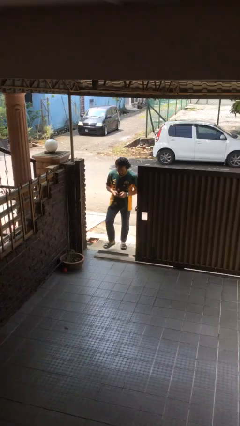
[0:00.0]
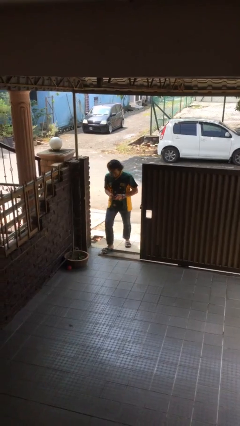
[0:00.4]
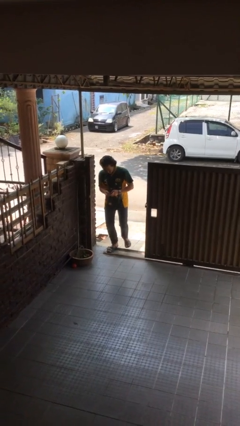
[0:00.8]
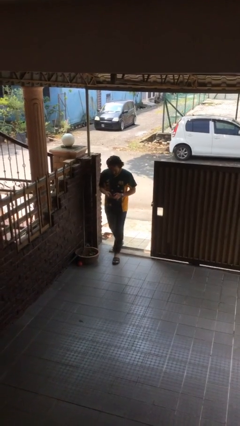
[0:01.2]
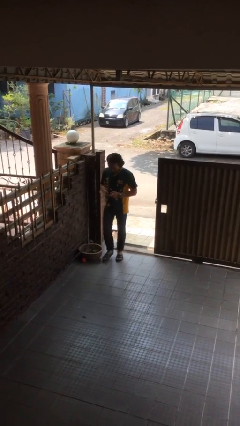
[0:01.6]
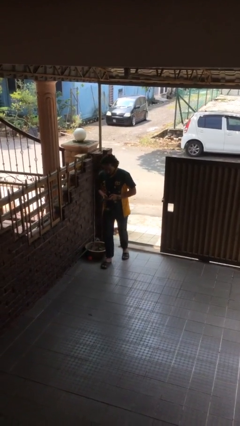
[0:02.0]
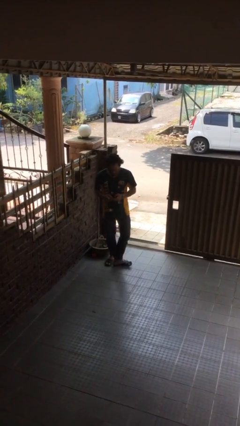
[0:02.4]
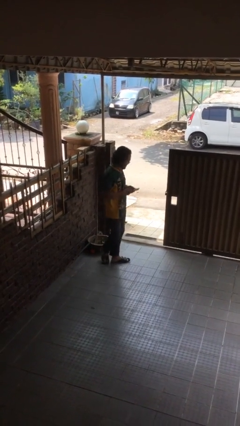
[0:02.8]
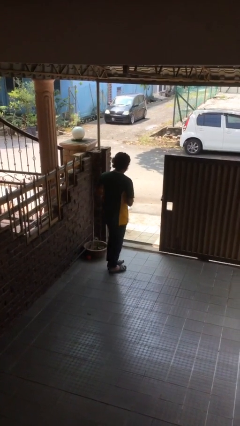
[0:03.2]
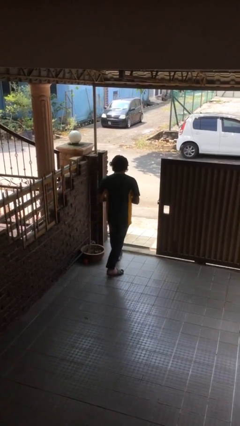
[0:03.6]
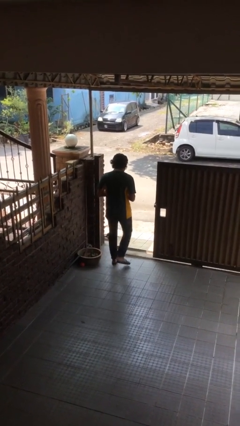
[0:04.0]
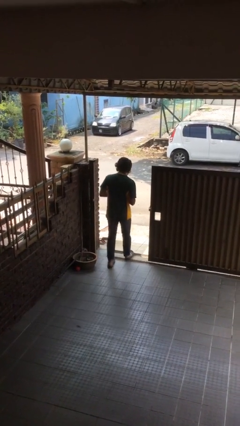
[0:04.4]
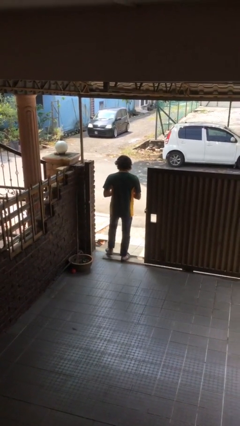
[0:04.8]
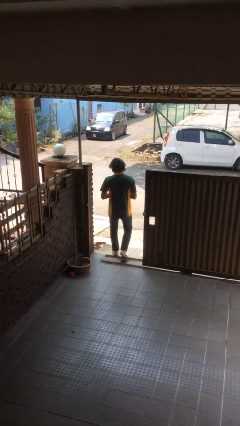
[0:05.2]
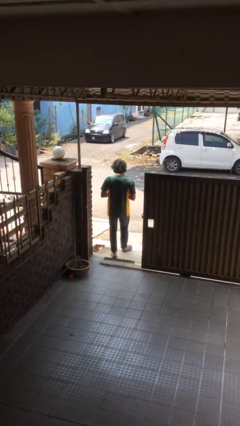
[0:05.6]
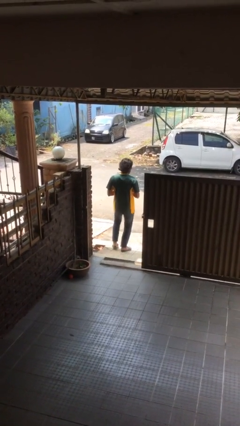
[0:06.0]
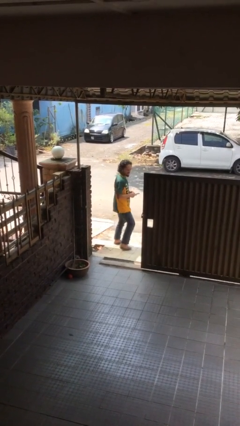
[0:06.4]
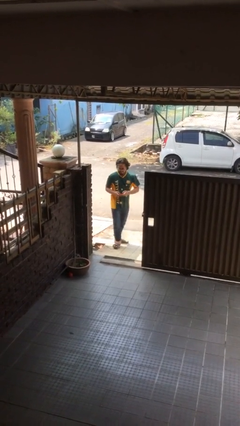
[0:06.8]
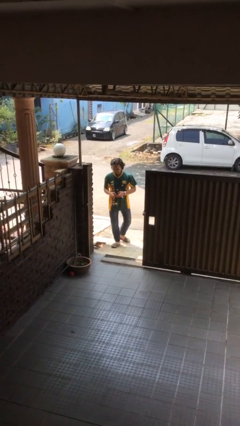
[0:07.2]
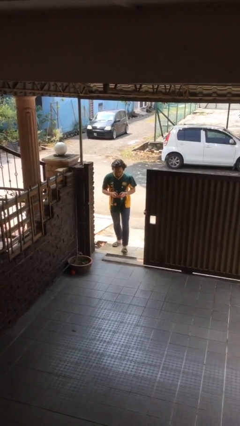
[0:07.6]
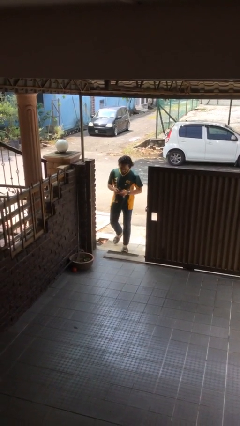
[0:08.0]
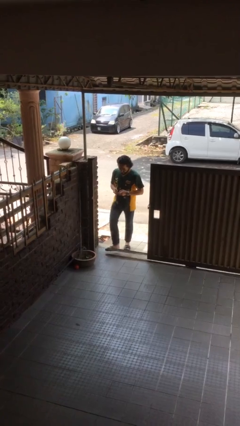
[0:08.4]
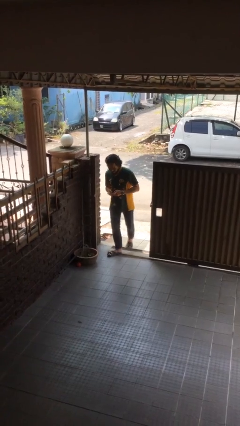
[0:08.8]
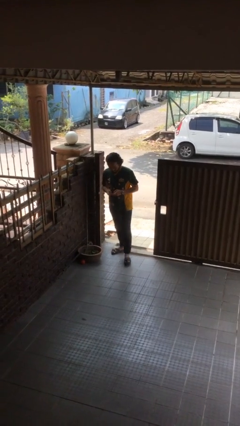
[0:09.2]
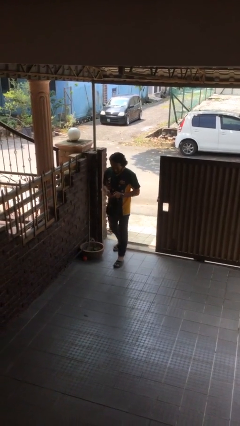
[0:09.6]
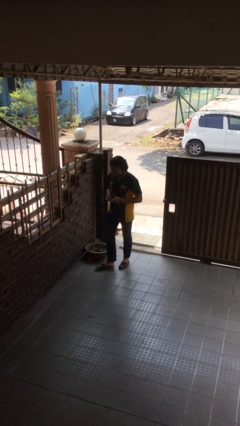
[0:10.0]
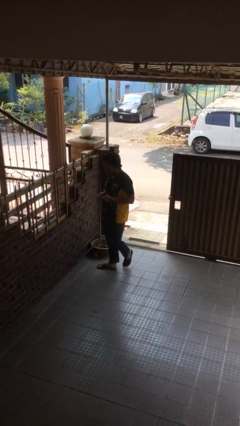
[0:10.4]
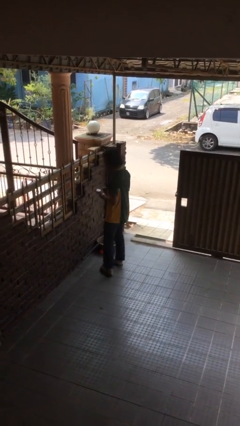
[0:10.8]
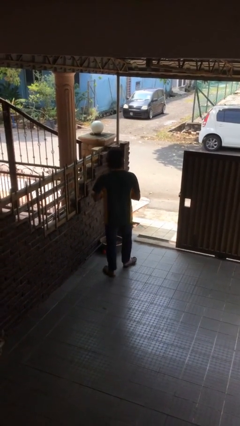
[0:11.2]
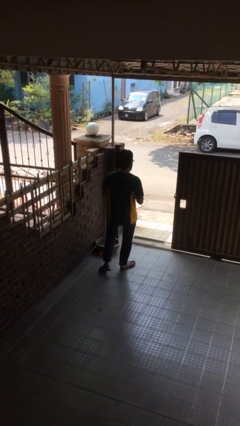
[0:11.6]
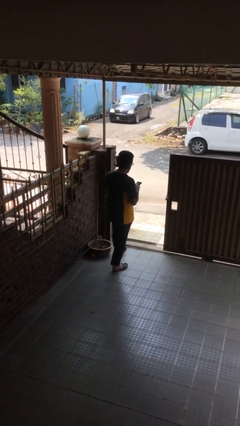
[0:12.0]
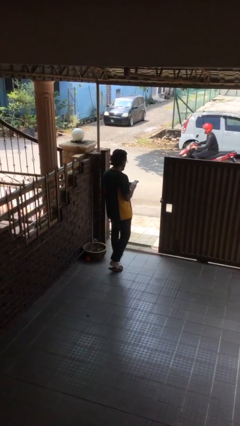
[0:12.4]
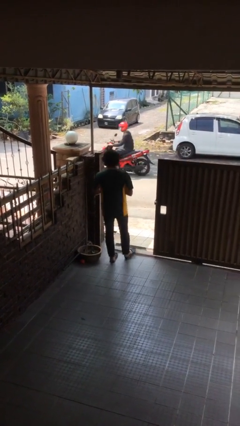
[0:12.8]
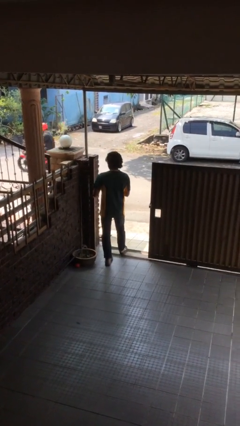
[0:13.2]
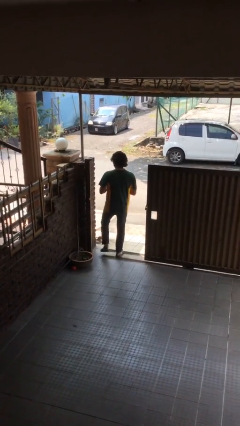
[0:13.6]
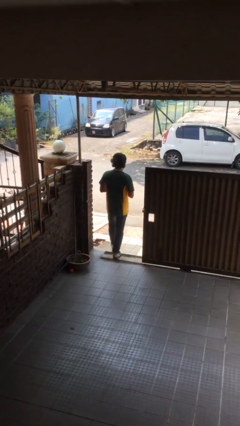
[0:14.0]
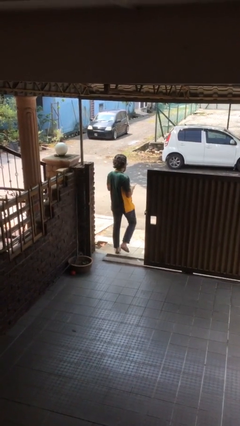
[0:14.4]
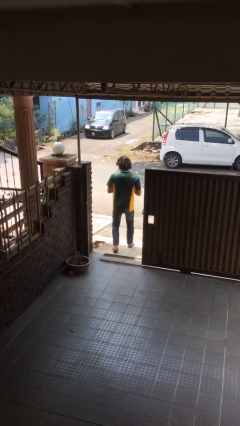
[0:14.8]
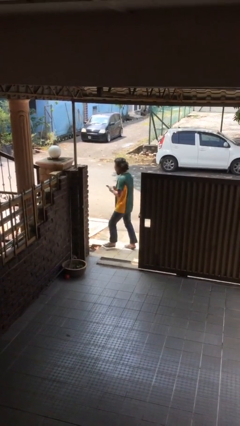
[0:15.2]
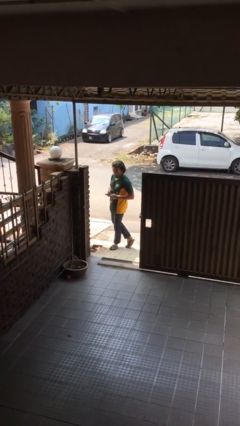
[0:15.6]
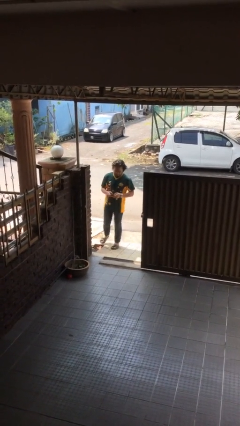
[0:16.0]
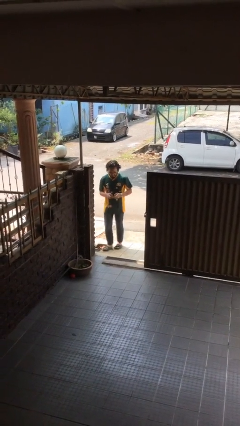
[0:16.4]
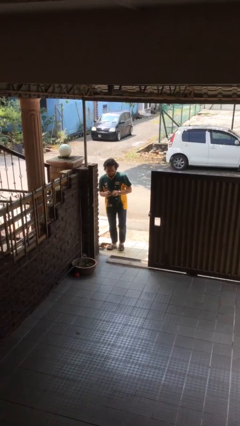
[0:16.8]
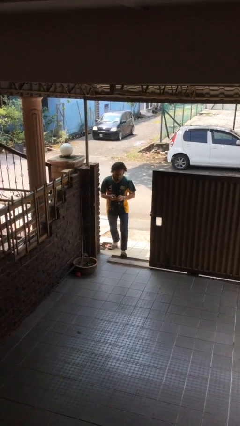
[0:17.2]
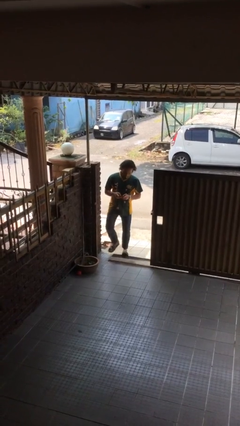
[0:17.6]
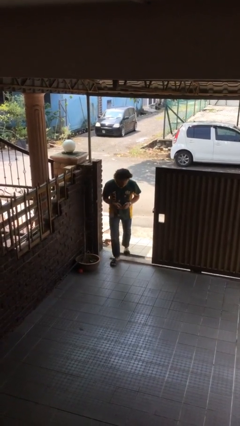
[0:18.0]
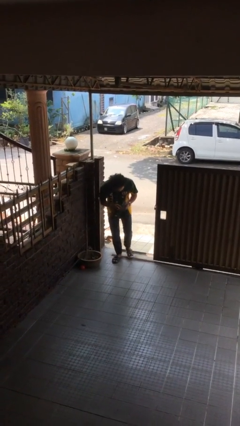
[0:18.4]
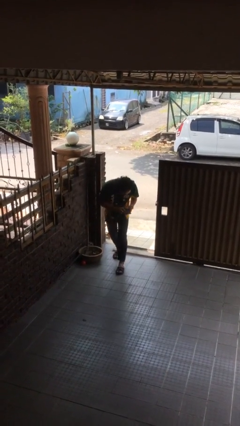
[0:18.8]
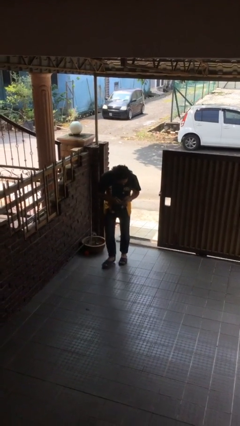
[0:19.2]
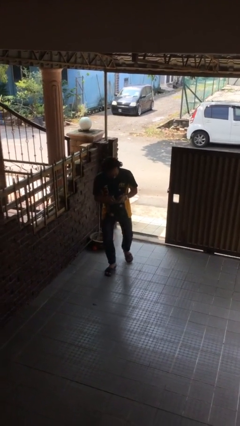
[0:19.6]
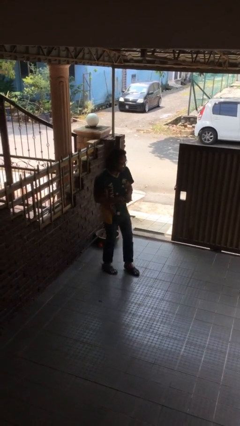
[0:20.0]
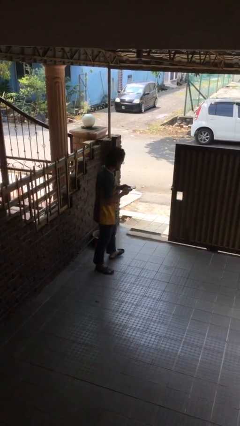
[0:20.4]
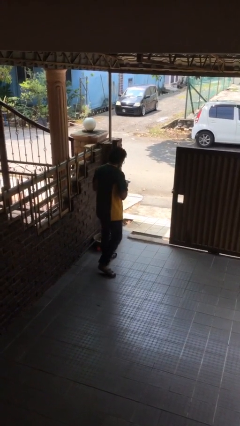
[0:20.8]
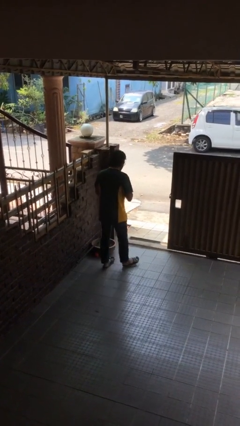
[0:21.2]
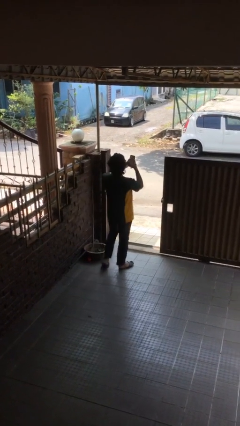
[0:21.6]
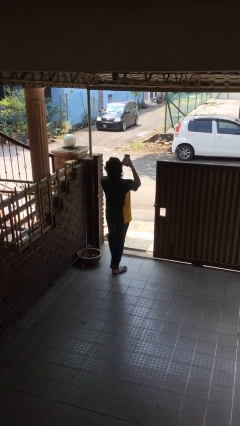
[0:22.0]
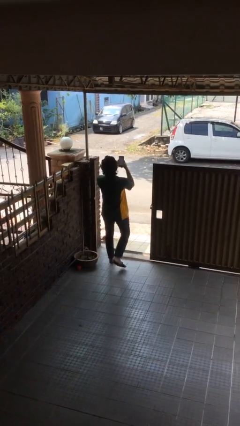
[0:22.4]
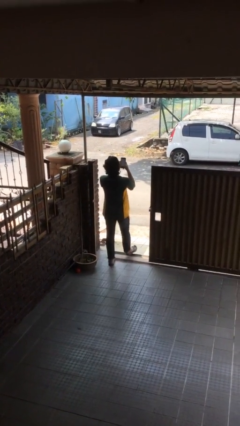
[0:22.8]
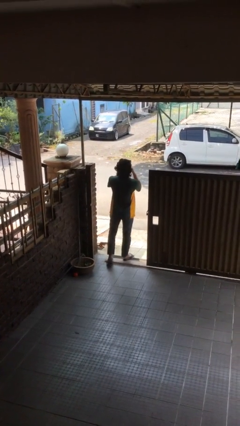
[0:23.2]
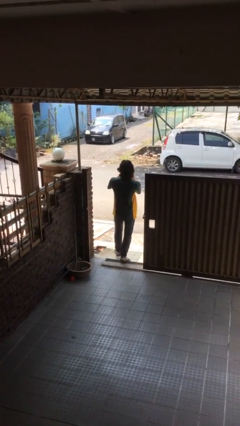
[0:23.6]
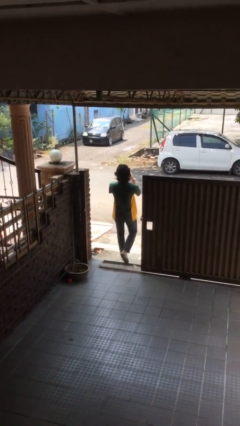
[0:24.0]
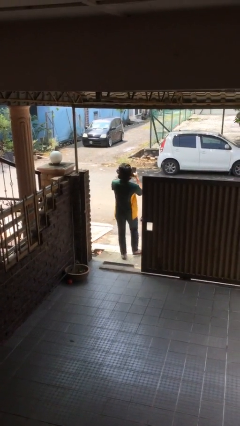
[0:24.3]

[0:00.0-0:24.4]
person texts on phone

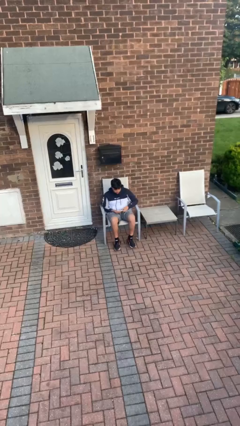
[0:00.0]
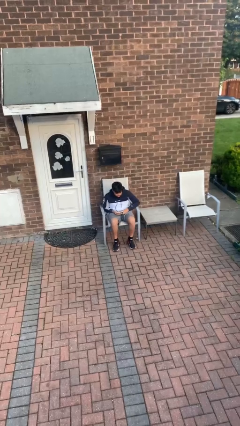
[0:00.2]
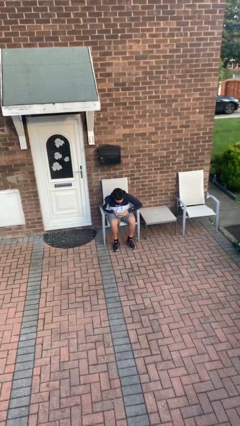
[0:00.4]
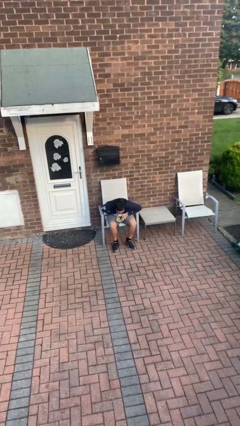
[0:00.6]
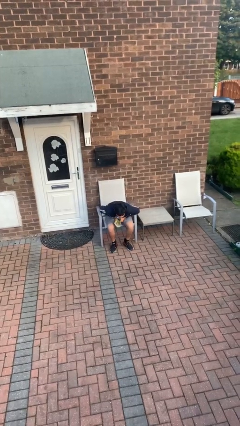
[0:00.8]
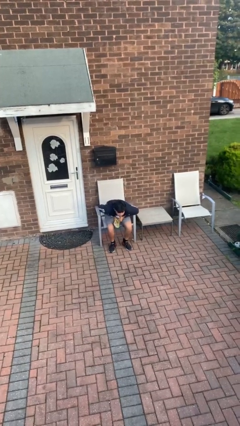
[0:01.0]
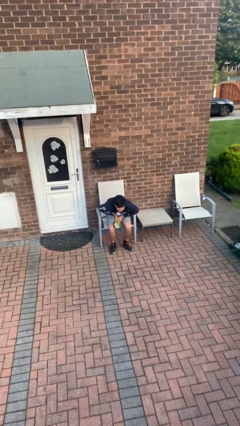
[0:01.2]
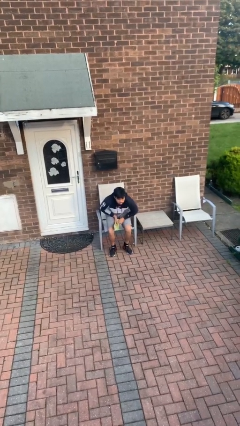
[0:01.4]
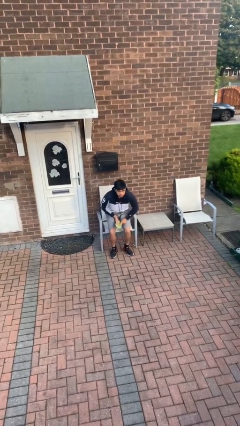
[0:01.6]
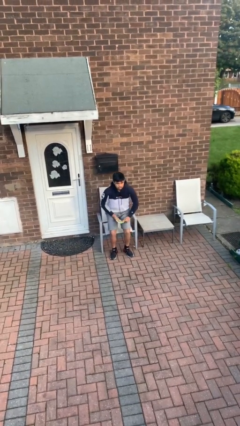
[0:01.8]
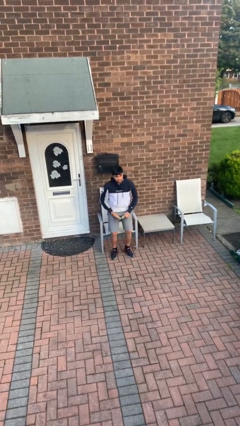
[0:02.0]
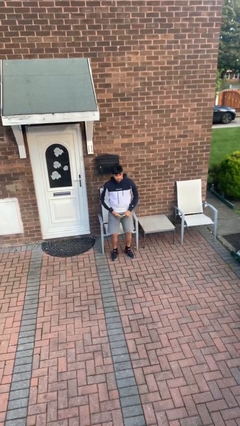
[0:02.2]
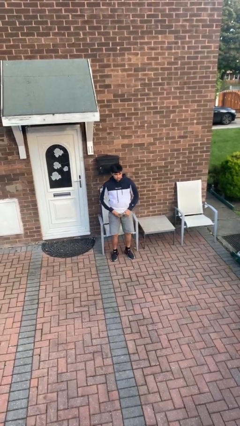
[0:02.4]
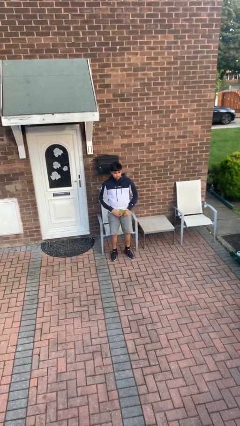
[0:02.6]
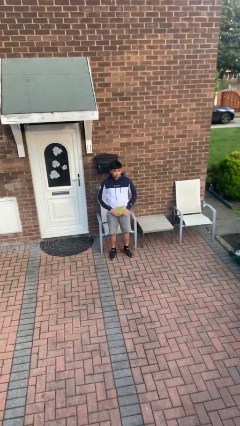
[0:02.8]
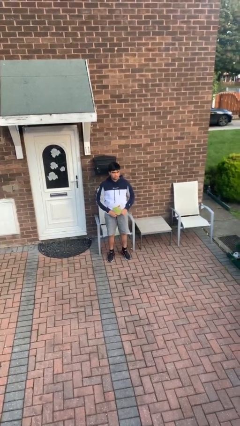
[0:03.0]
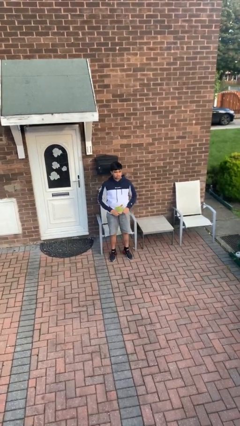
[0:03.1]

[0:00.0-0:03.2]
person stands up

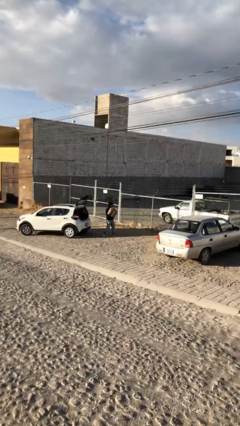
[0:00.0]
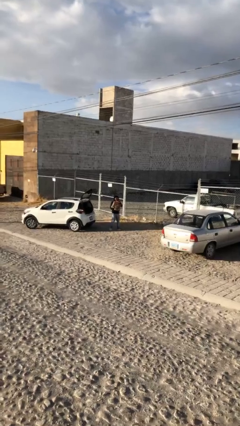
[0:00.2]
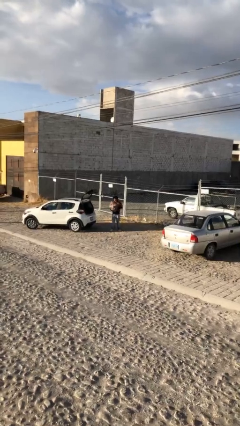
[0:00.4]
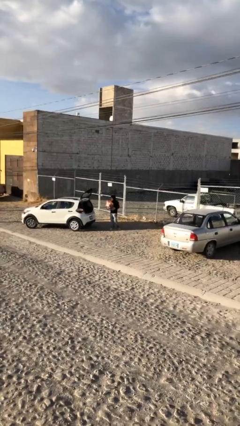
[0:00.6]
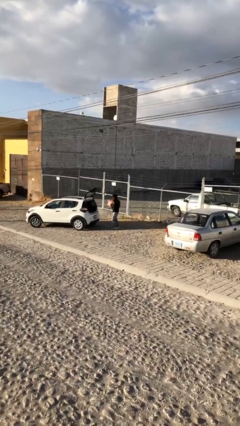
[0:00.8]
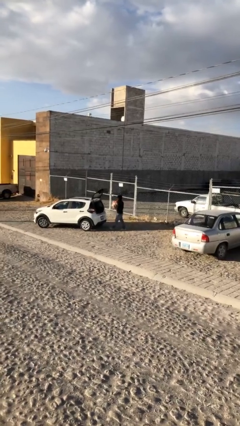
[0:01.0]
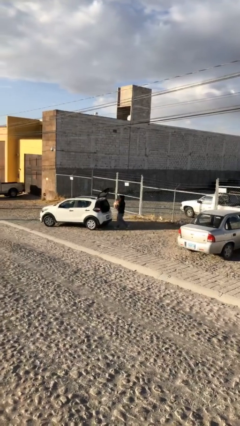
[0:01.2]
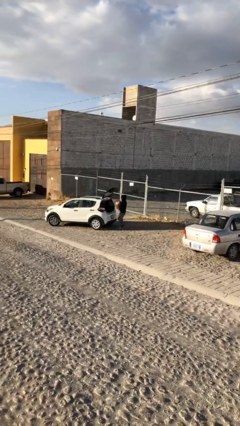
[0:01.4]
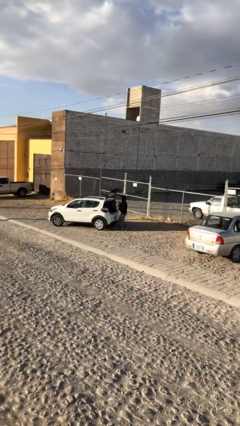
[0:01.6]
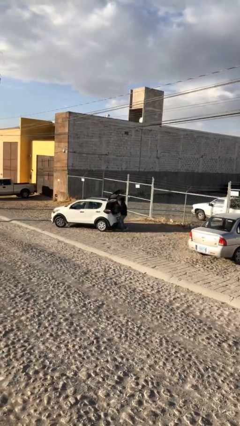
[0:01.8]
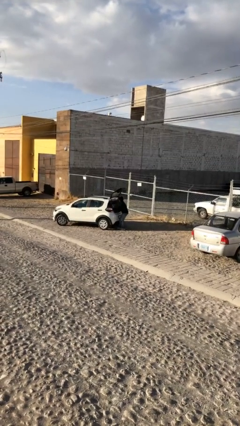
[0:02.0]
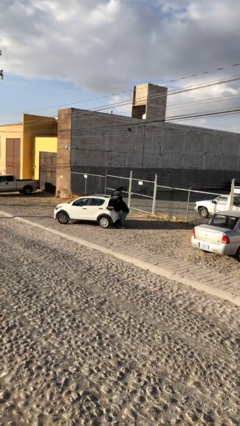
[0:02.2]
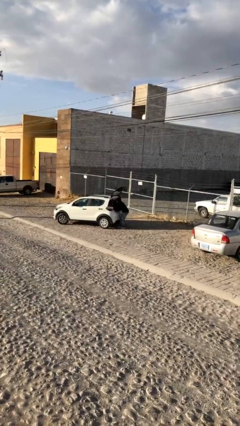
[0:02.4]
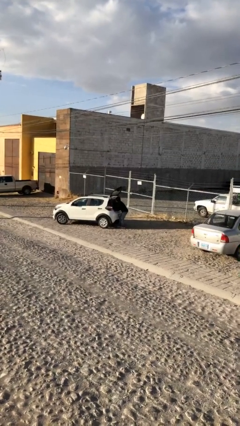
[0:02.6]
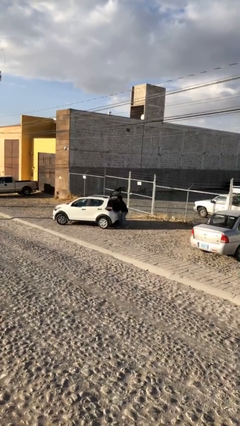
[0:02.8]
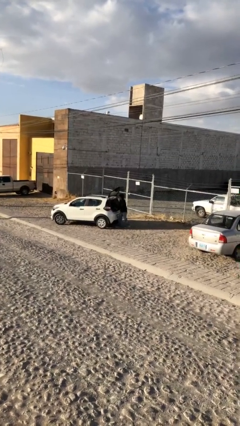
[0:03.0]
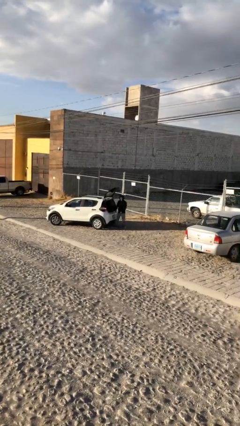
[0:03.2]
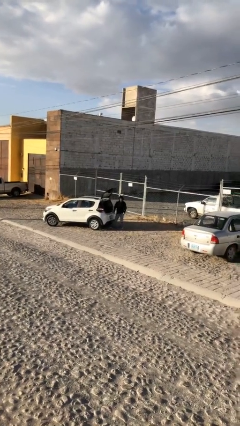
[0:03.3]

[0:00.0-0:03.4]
person loads car
